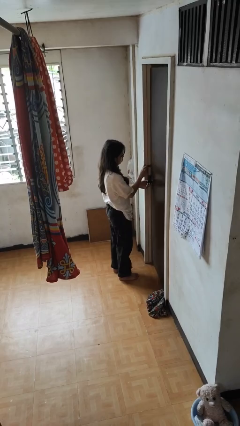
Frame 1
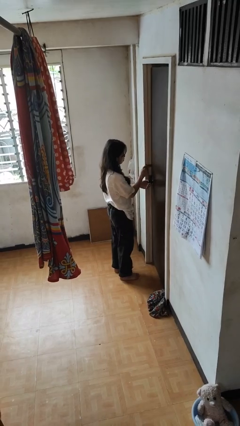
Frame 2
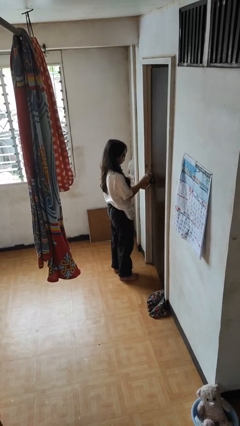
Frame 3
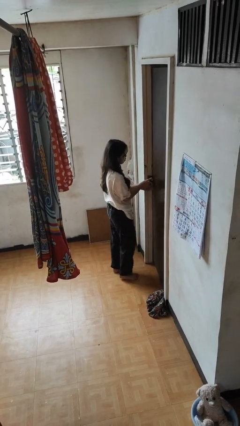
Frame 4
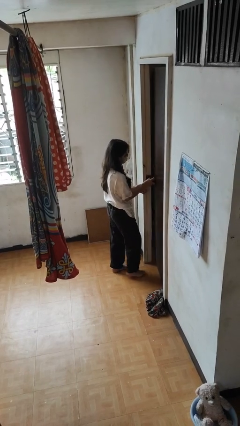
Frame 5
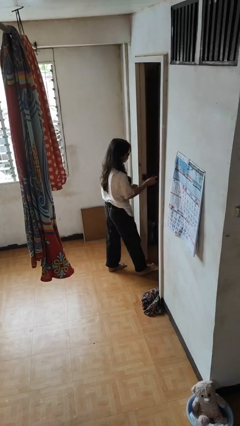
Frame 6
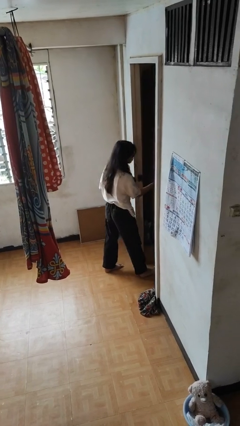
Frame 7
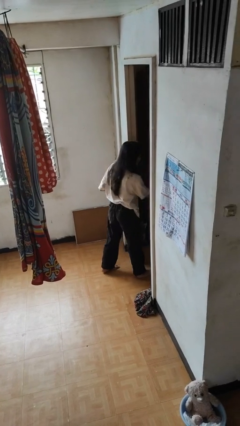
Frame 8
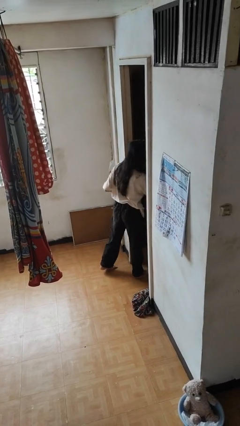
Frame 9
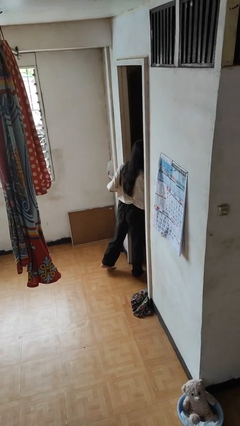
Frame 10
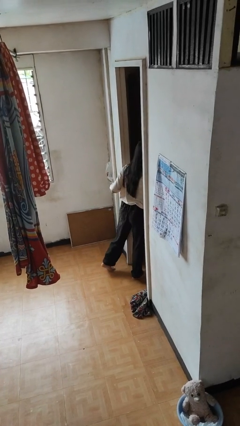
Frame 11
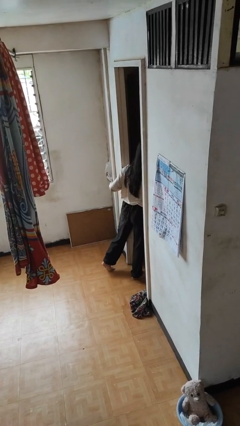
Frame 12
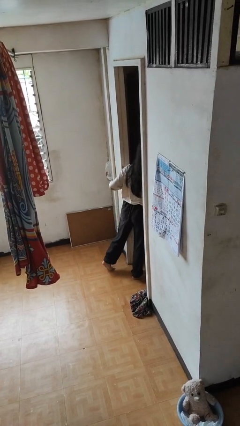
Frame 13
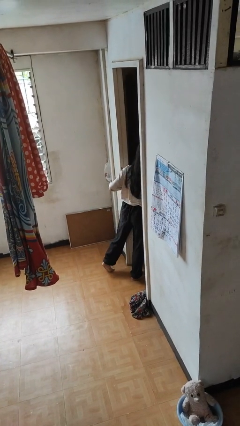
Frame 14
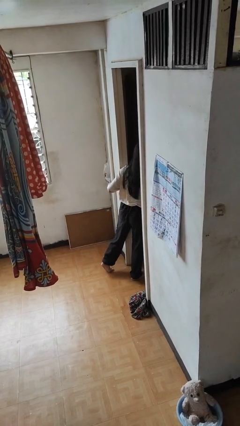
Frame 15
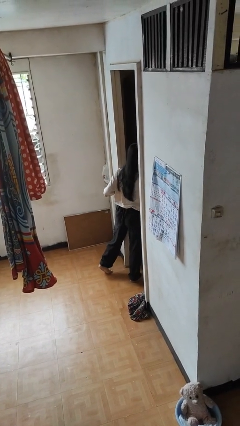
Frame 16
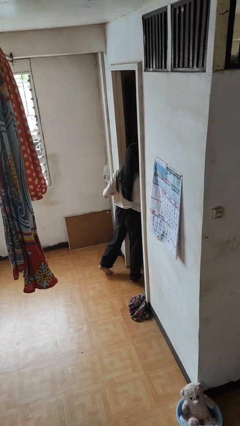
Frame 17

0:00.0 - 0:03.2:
person opens facility door

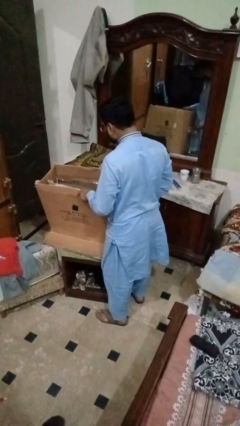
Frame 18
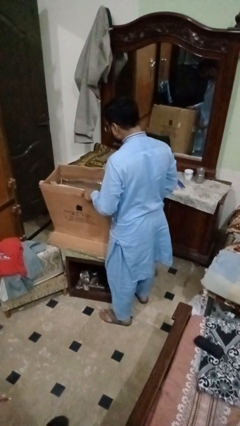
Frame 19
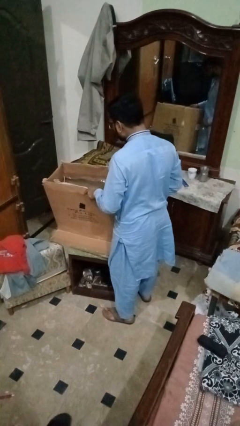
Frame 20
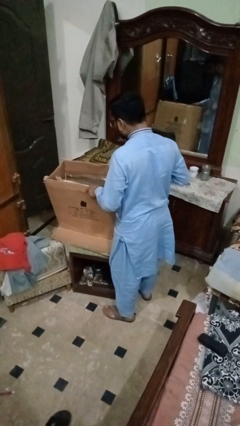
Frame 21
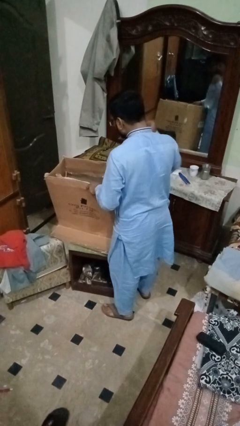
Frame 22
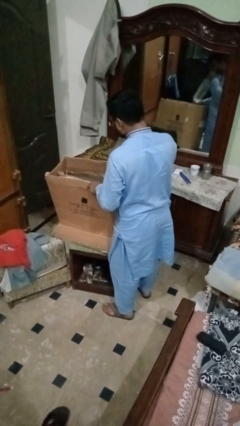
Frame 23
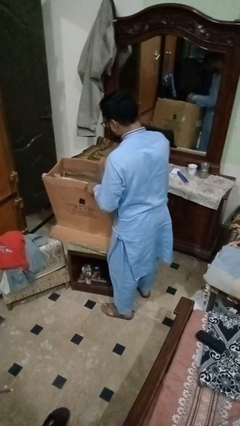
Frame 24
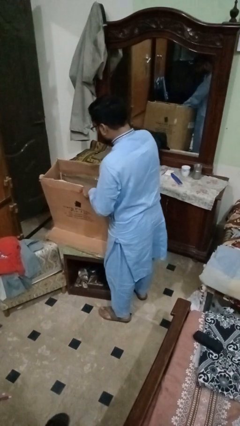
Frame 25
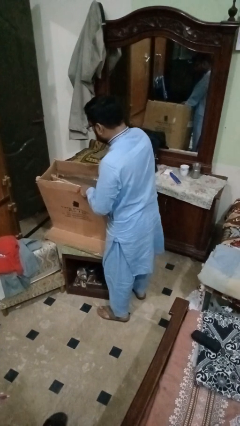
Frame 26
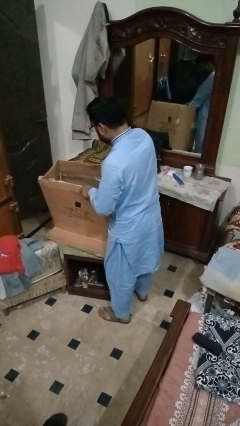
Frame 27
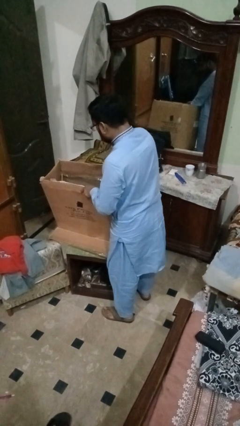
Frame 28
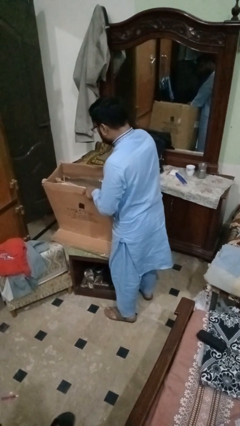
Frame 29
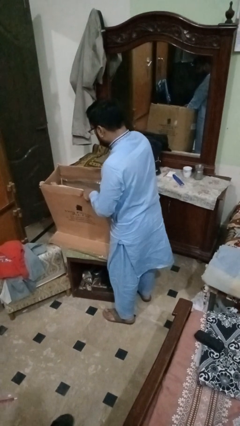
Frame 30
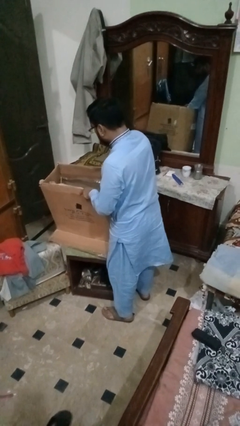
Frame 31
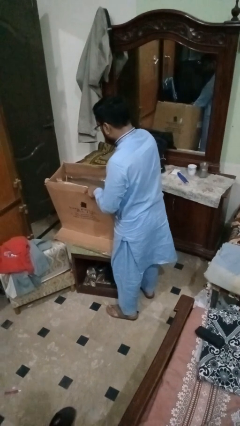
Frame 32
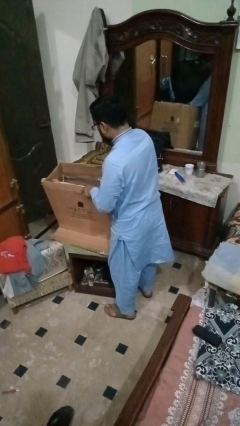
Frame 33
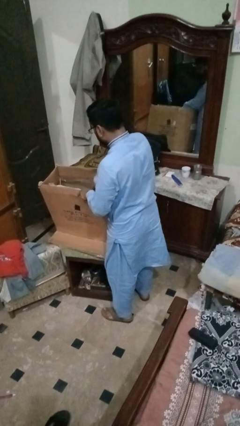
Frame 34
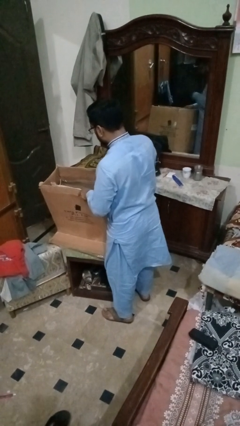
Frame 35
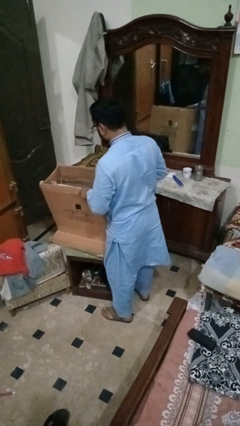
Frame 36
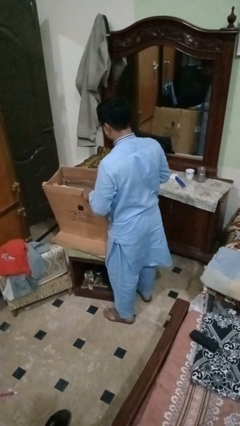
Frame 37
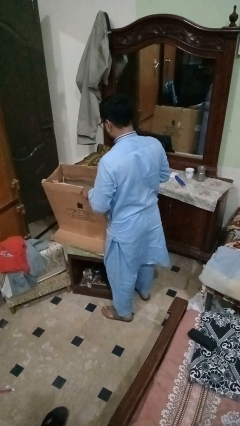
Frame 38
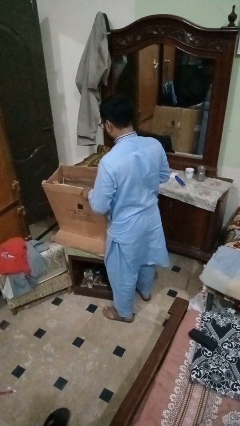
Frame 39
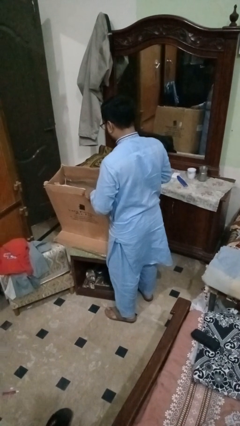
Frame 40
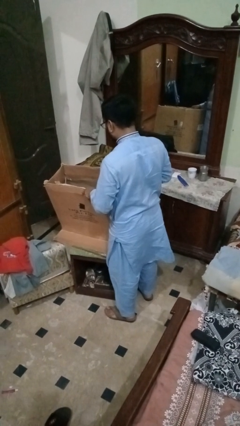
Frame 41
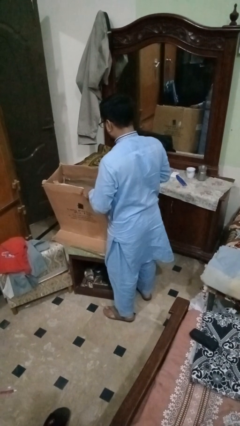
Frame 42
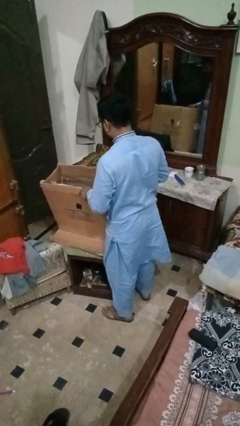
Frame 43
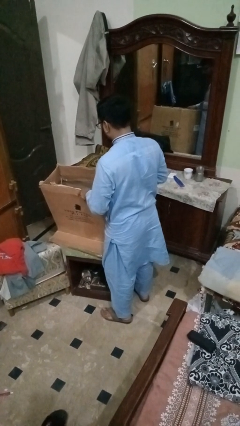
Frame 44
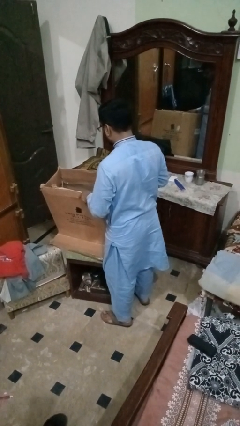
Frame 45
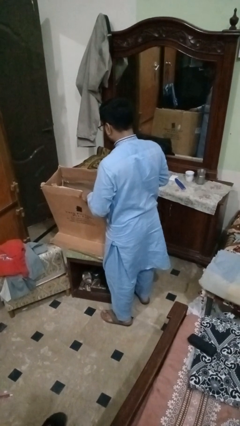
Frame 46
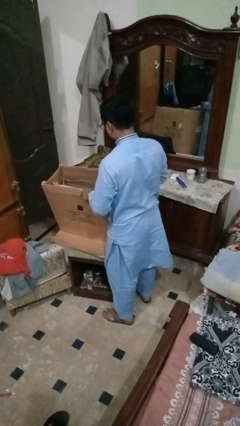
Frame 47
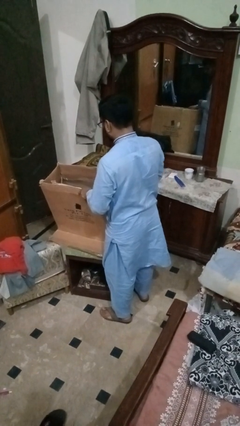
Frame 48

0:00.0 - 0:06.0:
person puts object into box

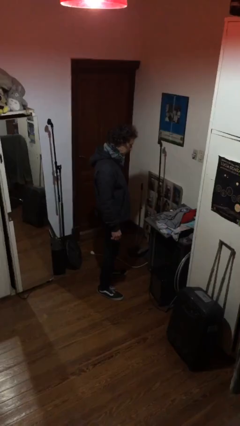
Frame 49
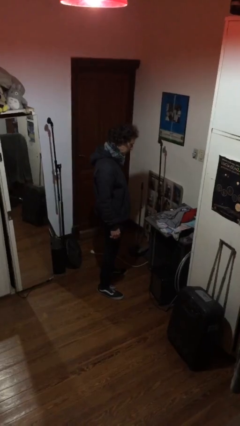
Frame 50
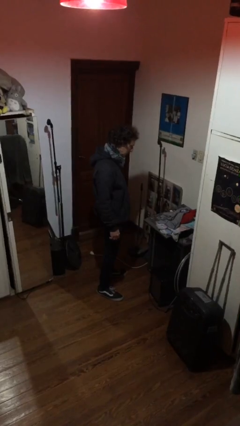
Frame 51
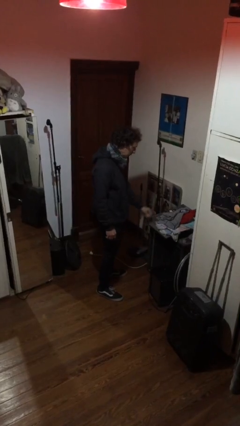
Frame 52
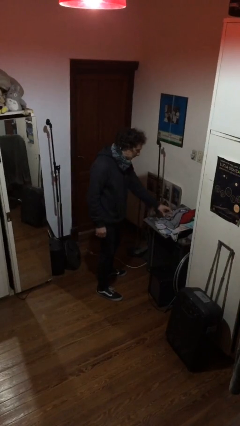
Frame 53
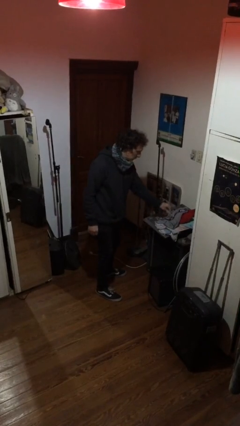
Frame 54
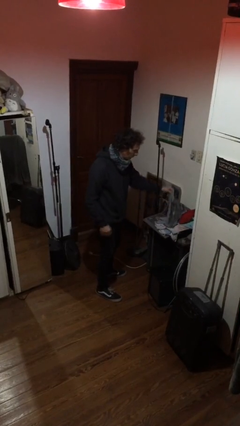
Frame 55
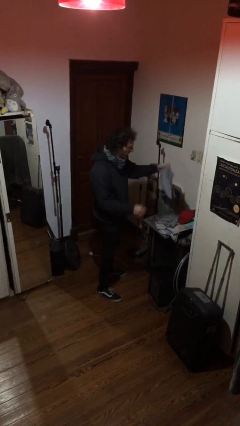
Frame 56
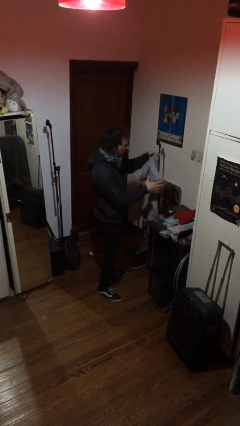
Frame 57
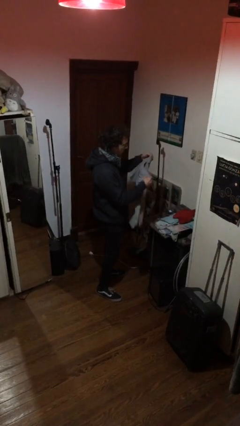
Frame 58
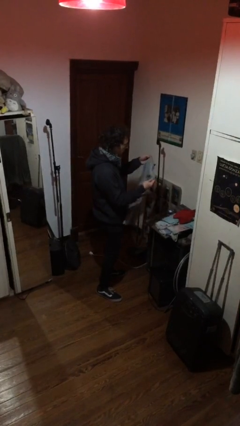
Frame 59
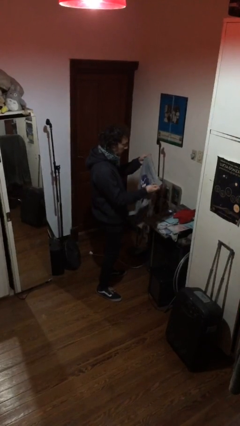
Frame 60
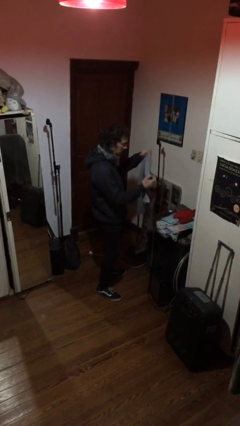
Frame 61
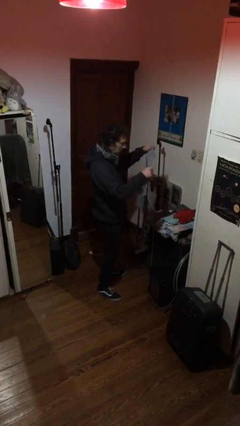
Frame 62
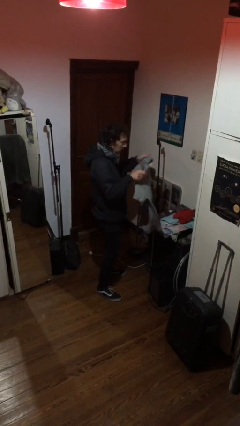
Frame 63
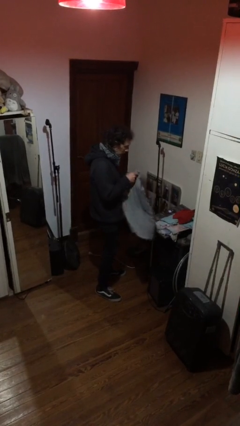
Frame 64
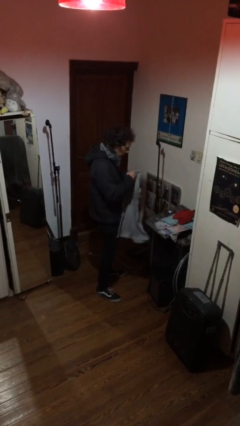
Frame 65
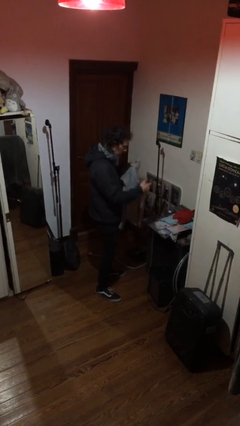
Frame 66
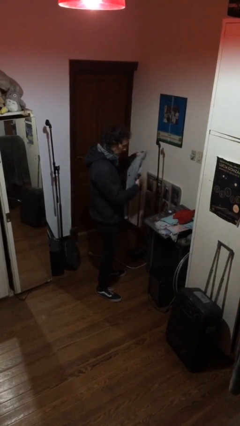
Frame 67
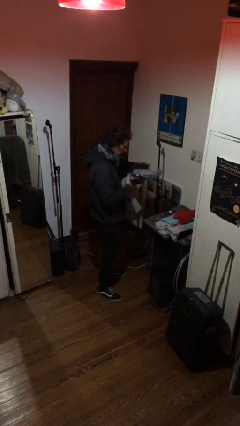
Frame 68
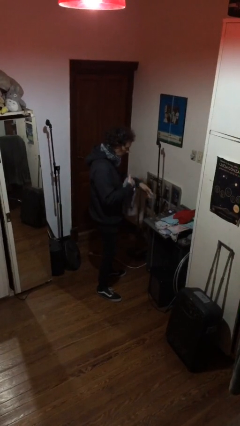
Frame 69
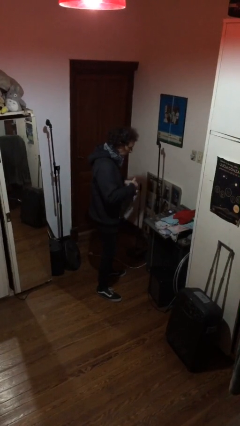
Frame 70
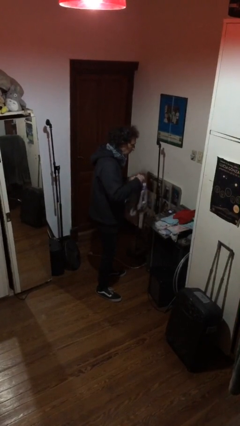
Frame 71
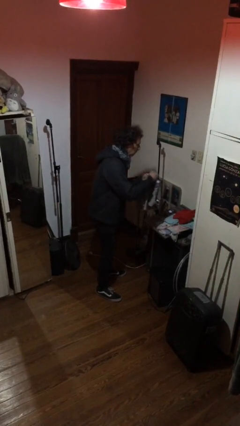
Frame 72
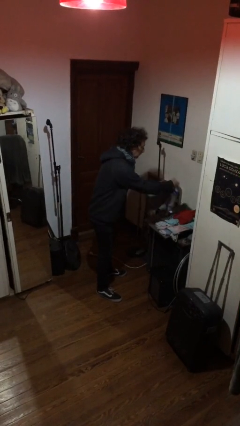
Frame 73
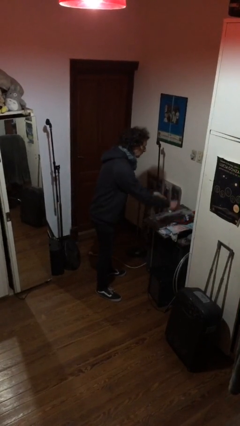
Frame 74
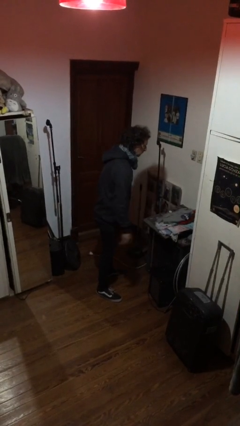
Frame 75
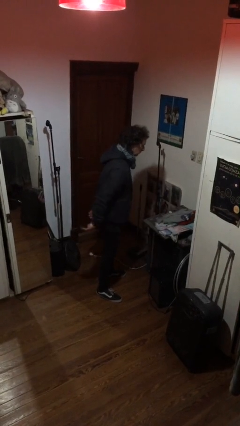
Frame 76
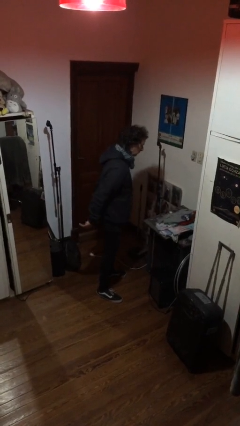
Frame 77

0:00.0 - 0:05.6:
person folds shirt

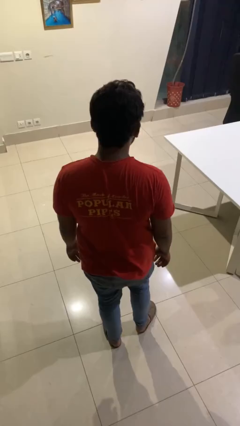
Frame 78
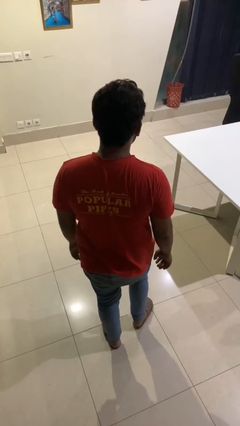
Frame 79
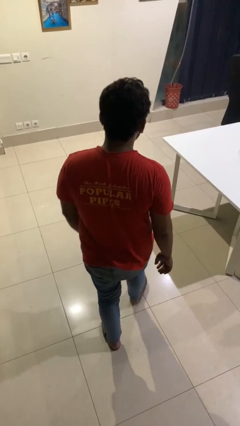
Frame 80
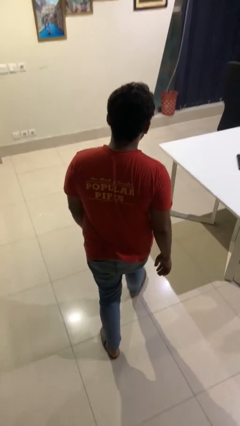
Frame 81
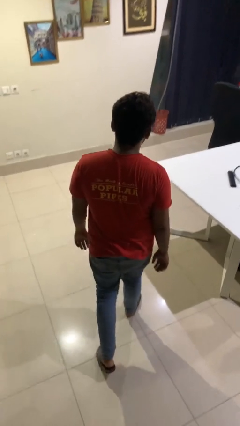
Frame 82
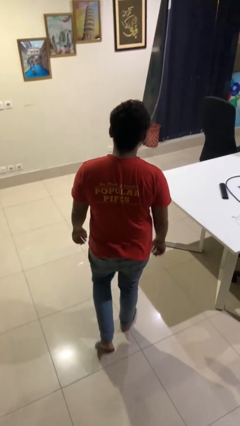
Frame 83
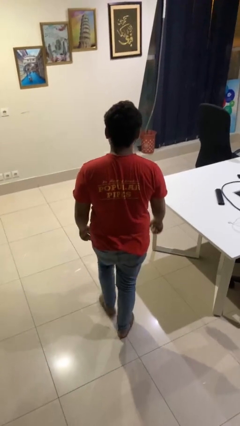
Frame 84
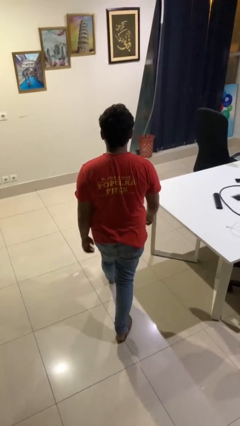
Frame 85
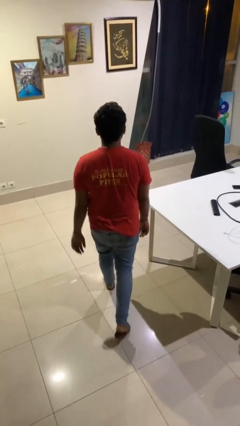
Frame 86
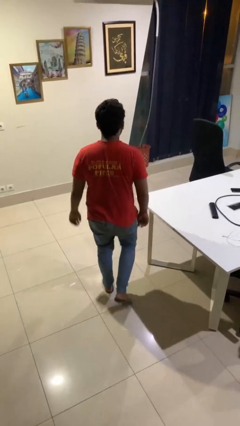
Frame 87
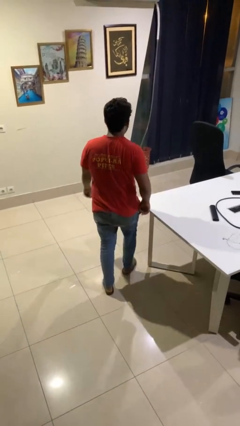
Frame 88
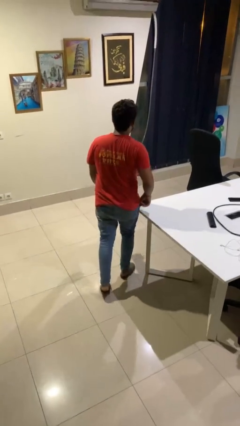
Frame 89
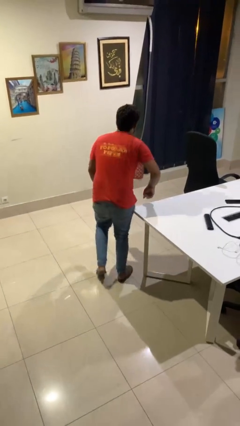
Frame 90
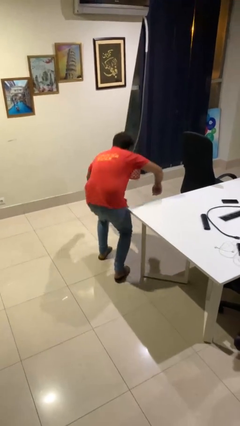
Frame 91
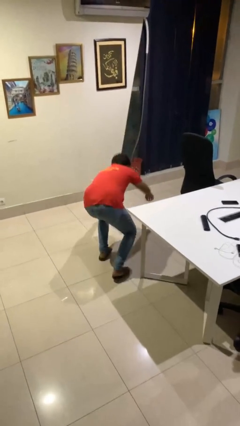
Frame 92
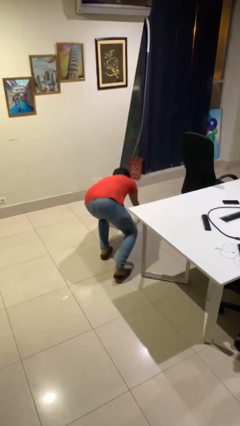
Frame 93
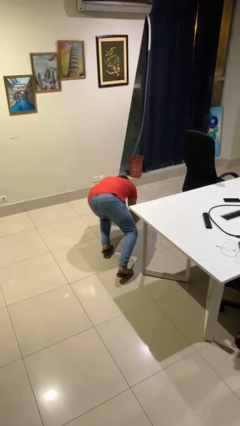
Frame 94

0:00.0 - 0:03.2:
person trips on object on floor
